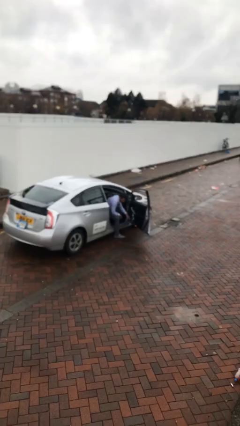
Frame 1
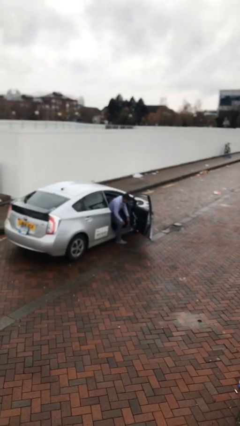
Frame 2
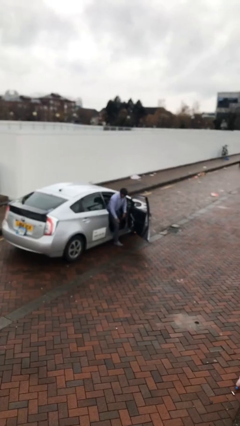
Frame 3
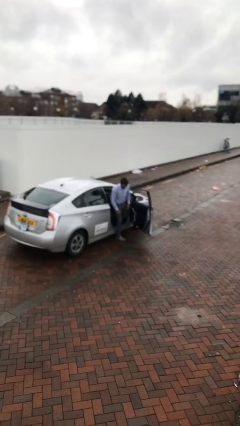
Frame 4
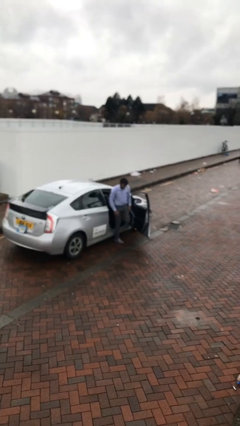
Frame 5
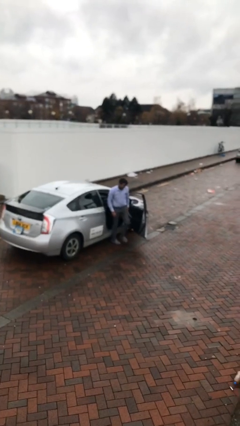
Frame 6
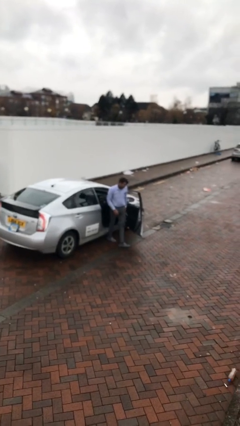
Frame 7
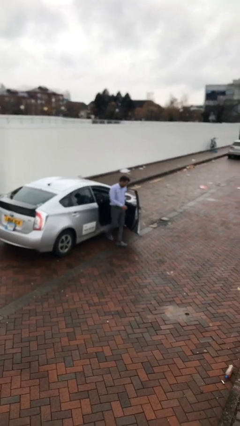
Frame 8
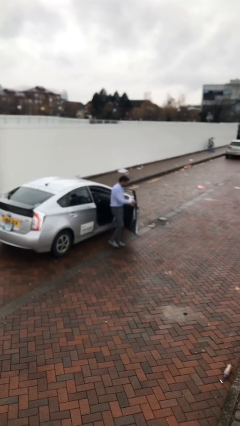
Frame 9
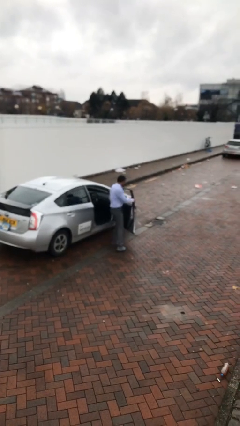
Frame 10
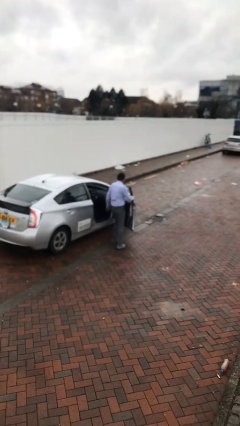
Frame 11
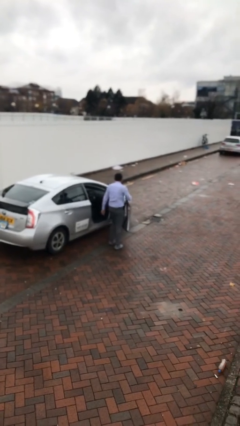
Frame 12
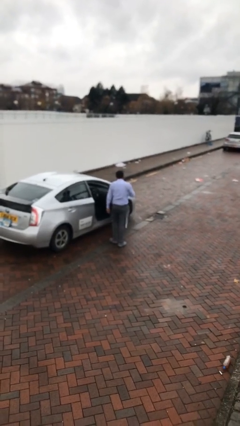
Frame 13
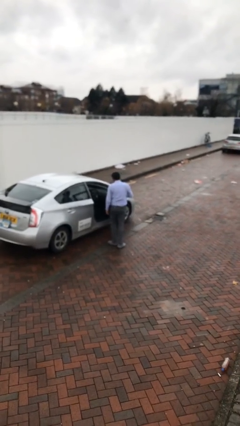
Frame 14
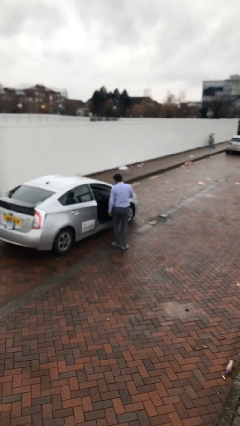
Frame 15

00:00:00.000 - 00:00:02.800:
person exits car

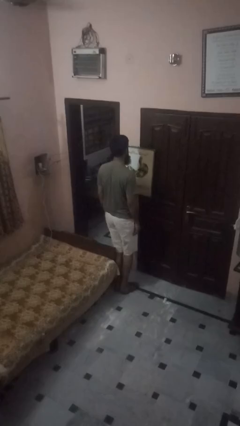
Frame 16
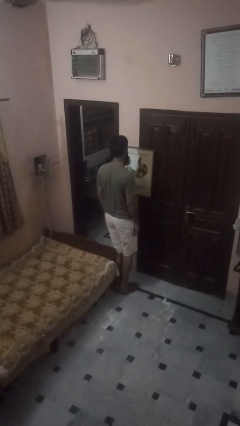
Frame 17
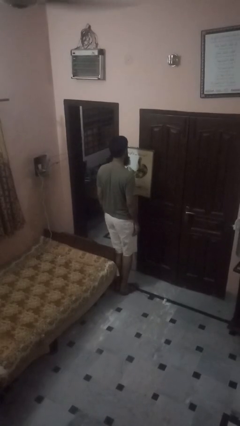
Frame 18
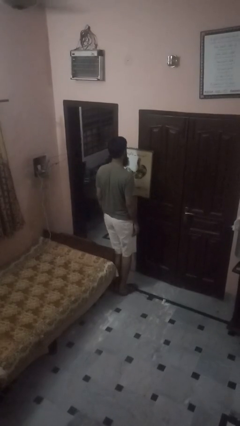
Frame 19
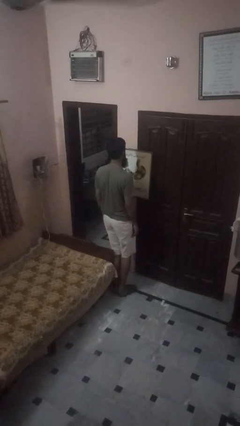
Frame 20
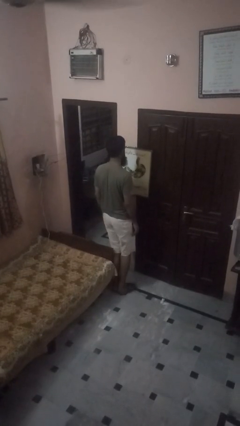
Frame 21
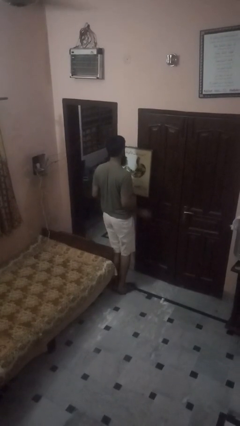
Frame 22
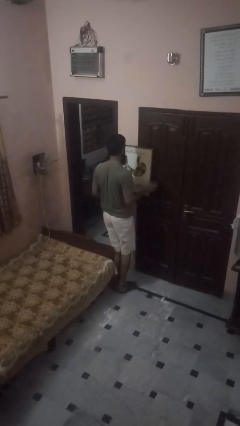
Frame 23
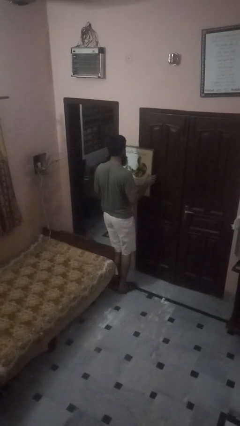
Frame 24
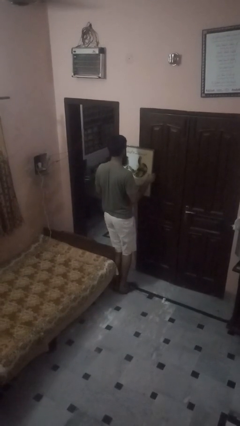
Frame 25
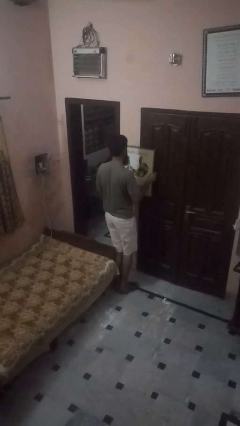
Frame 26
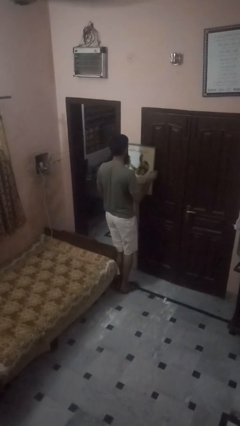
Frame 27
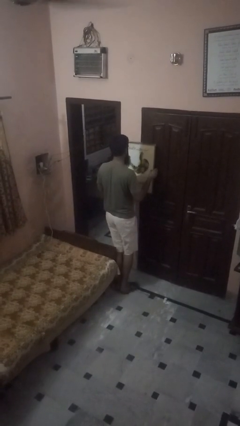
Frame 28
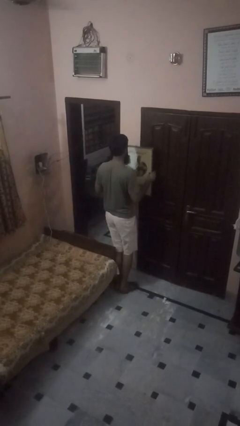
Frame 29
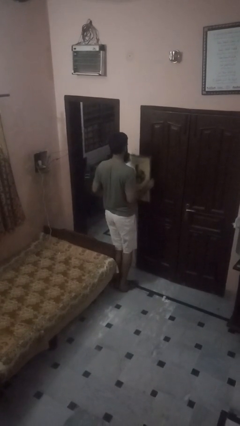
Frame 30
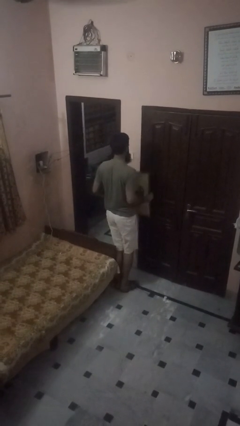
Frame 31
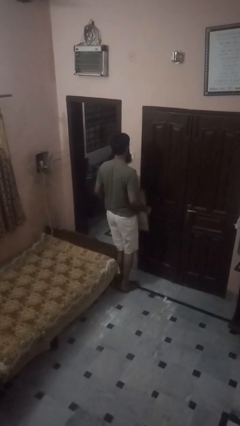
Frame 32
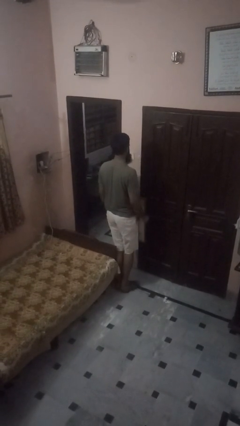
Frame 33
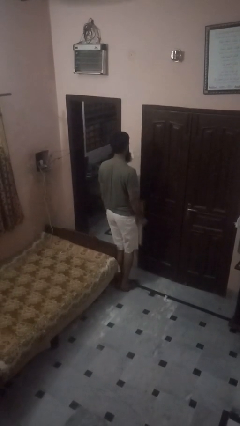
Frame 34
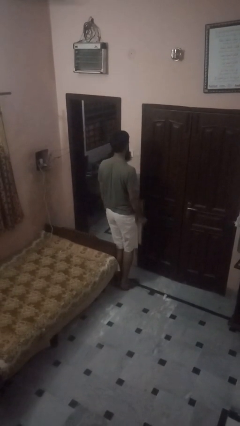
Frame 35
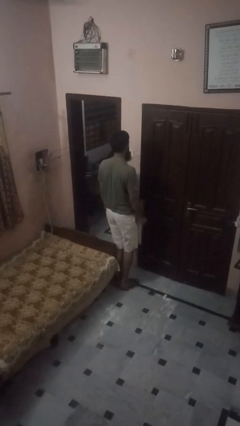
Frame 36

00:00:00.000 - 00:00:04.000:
person takes down picture frame

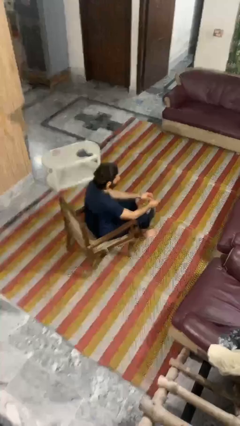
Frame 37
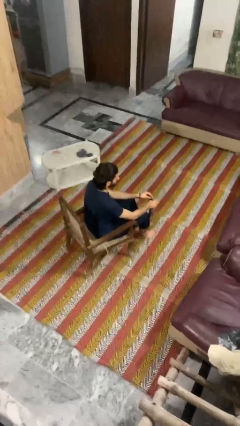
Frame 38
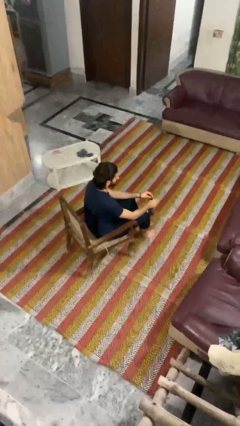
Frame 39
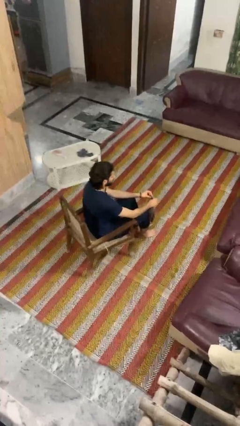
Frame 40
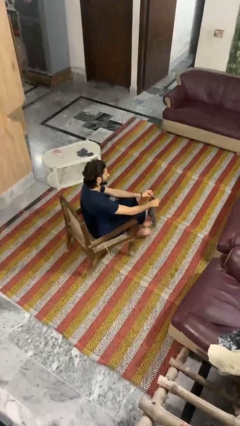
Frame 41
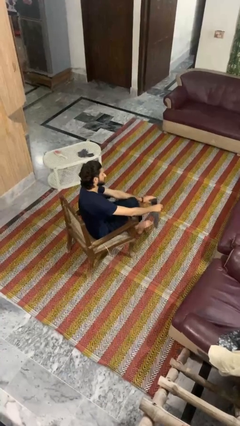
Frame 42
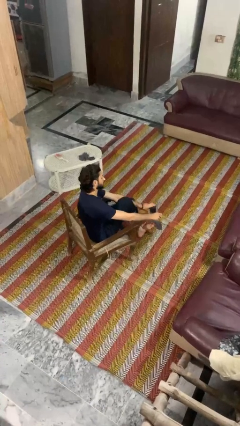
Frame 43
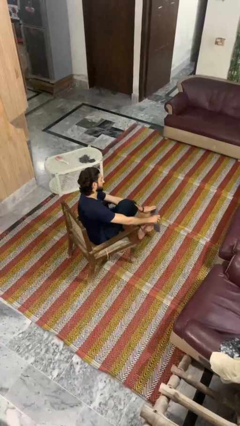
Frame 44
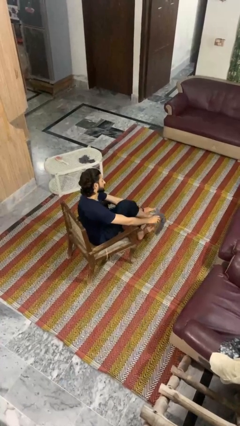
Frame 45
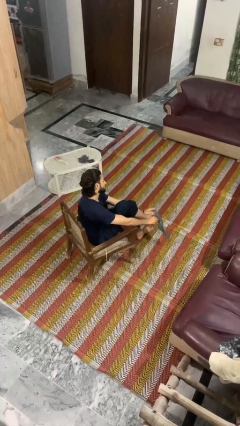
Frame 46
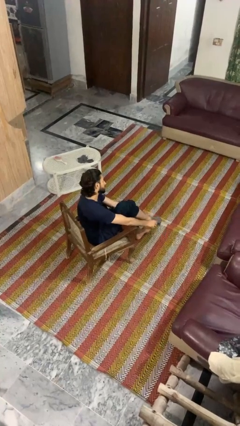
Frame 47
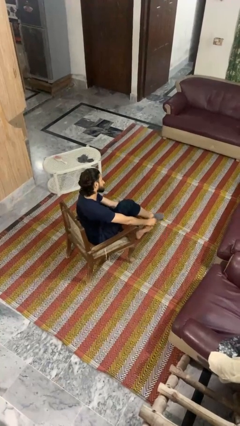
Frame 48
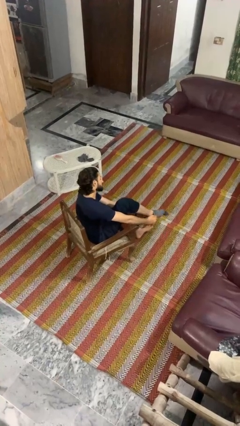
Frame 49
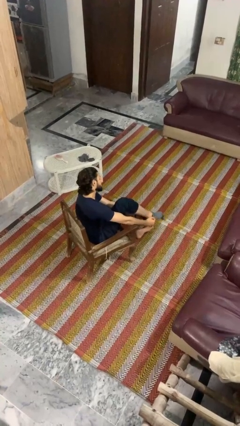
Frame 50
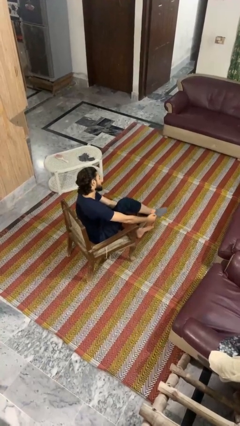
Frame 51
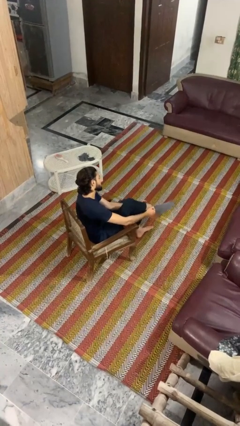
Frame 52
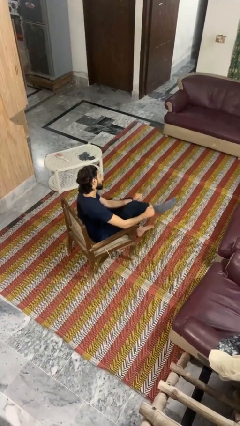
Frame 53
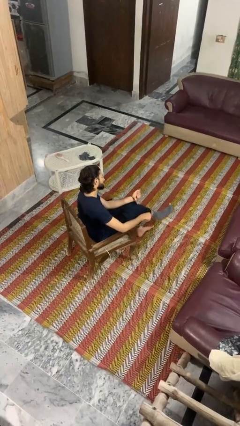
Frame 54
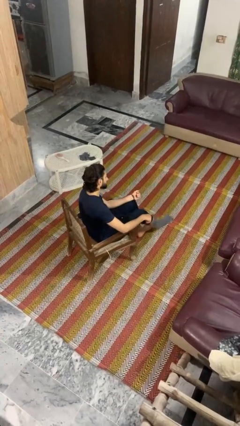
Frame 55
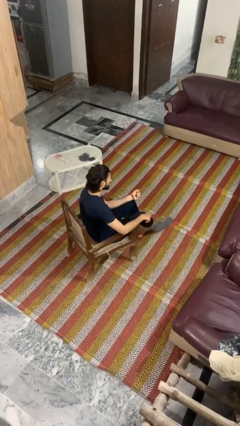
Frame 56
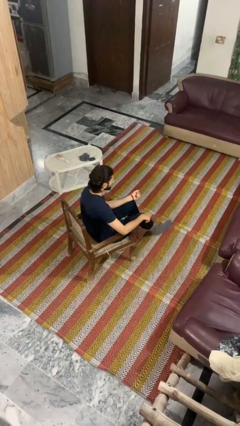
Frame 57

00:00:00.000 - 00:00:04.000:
person puts on socks

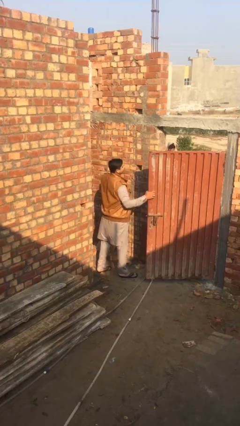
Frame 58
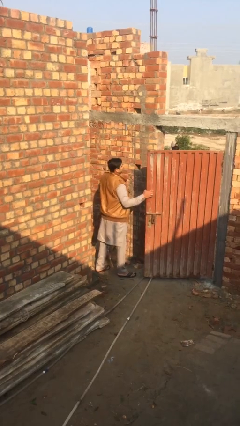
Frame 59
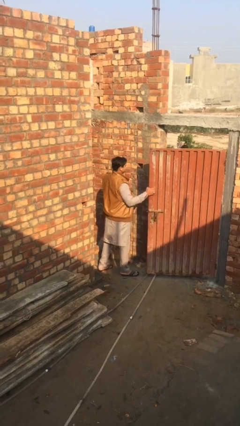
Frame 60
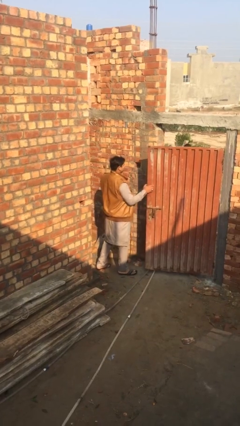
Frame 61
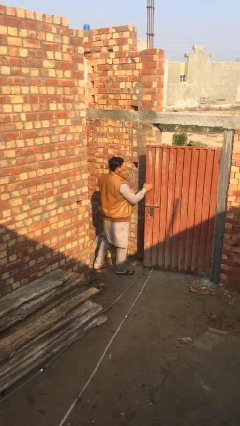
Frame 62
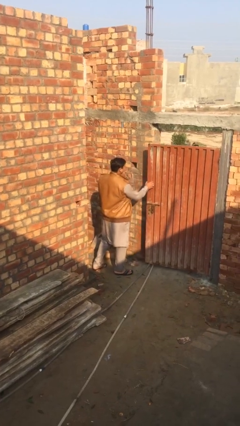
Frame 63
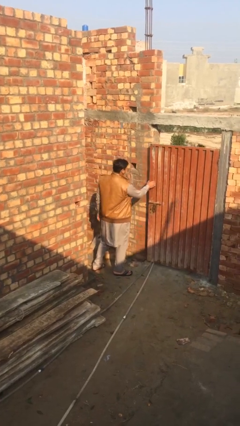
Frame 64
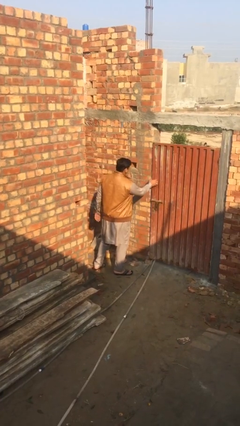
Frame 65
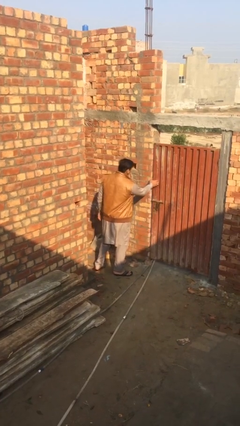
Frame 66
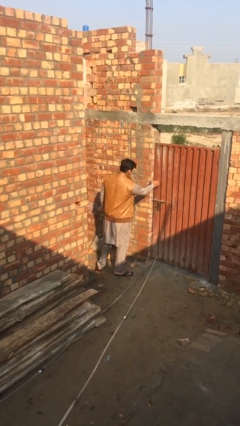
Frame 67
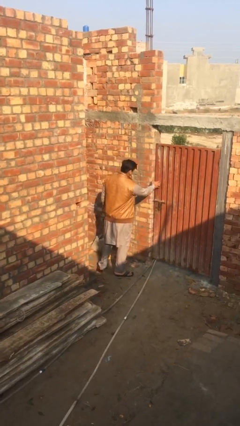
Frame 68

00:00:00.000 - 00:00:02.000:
person closes facility door

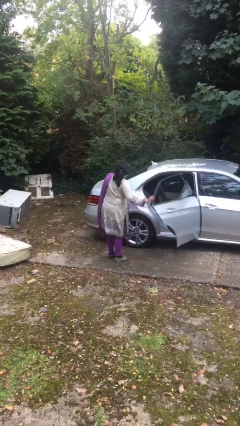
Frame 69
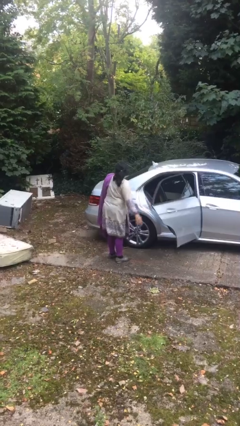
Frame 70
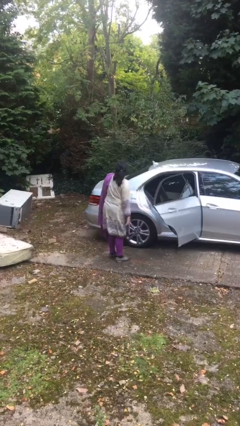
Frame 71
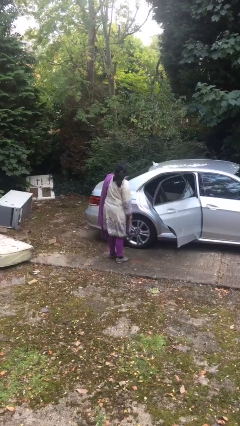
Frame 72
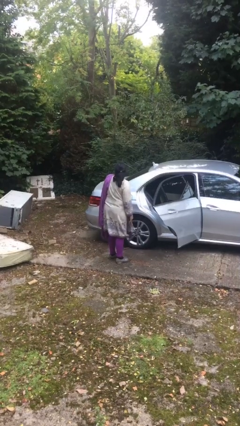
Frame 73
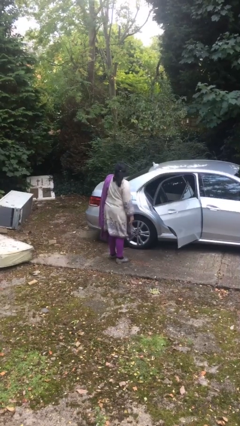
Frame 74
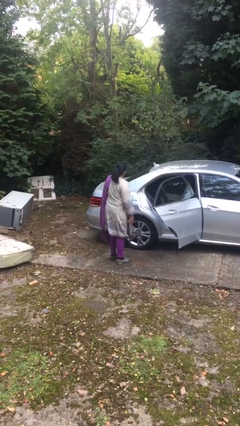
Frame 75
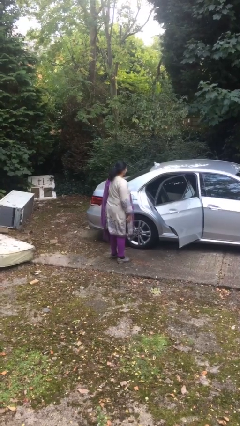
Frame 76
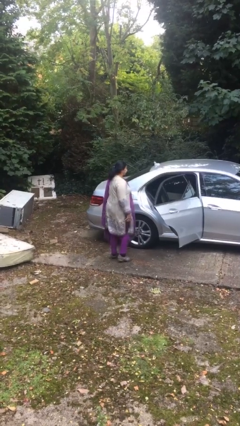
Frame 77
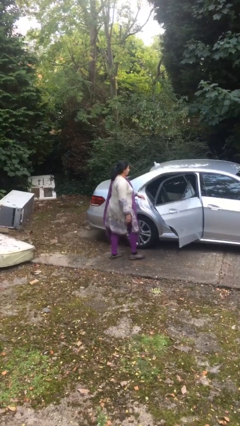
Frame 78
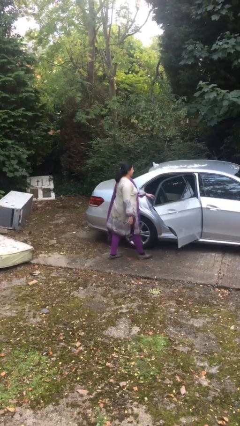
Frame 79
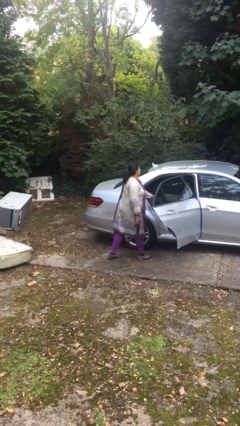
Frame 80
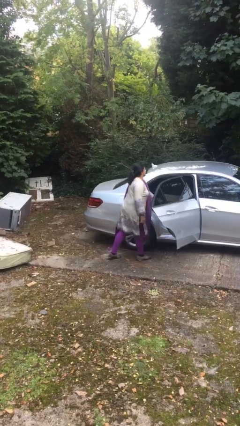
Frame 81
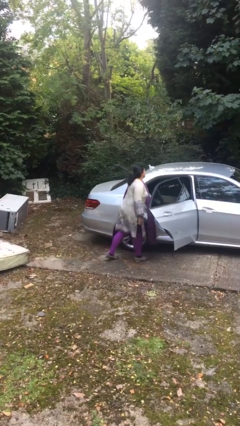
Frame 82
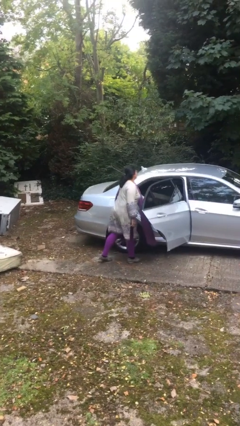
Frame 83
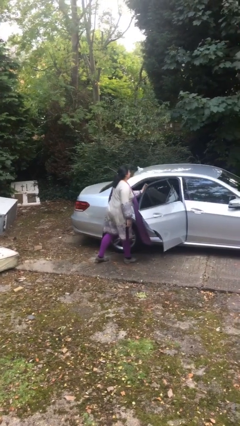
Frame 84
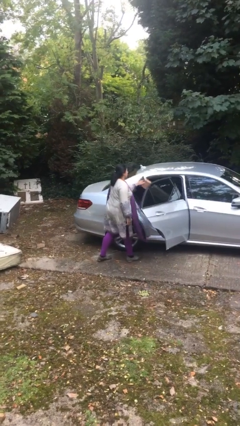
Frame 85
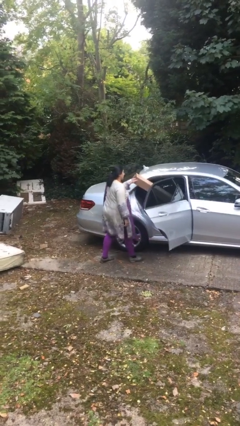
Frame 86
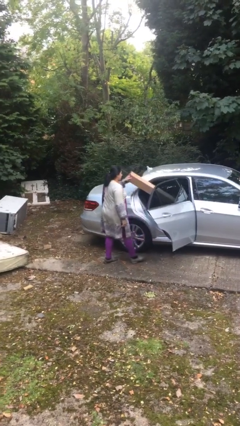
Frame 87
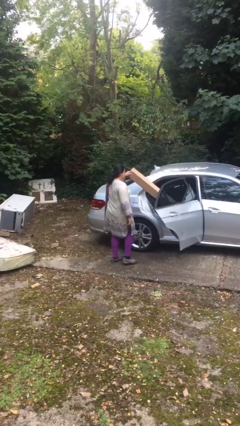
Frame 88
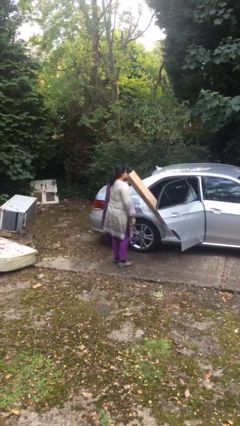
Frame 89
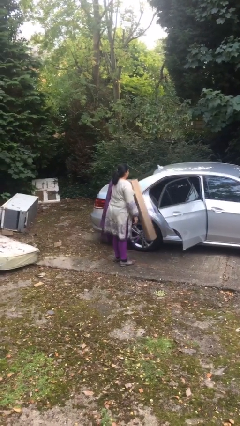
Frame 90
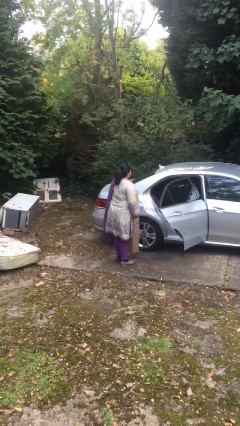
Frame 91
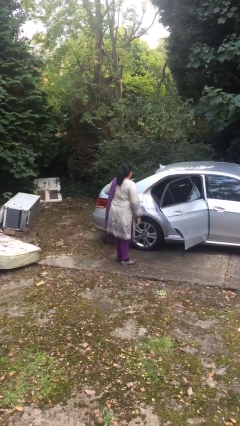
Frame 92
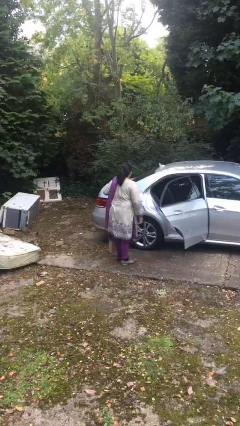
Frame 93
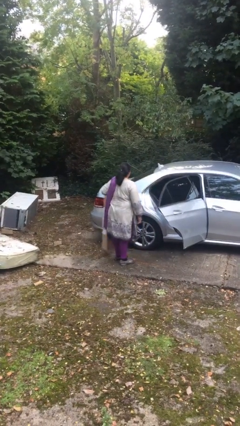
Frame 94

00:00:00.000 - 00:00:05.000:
person unloads car
